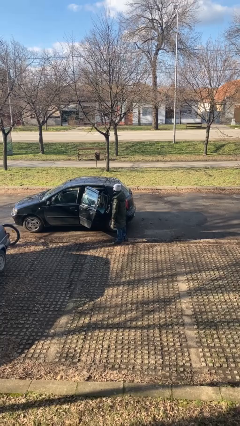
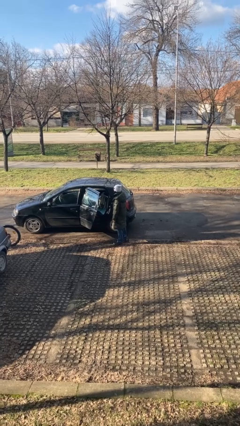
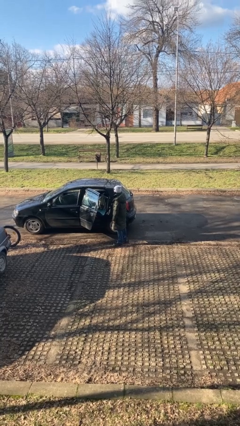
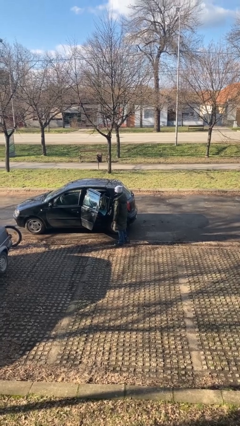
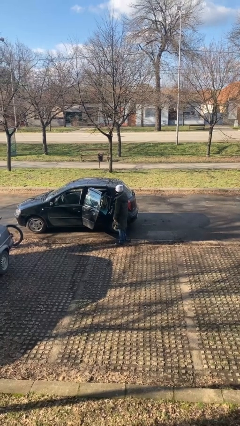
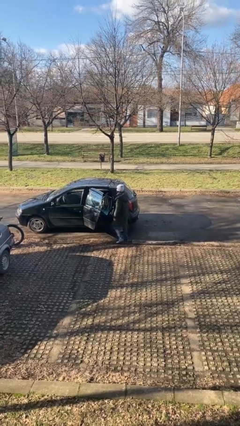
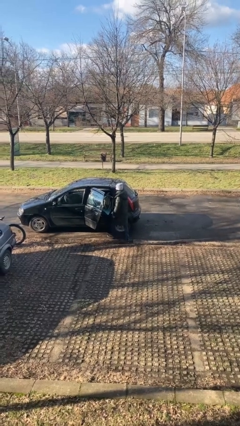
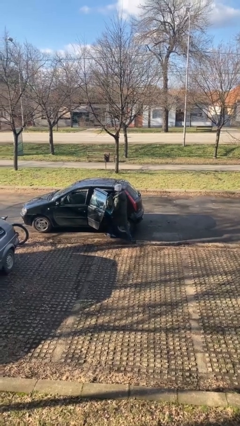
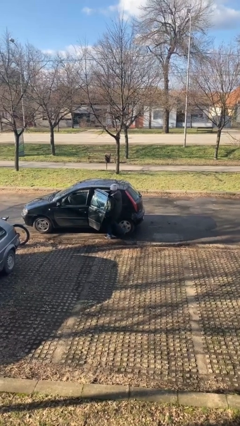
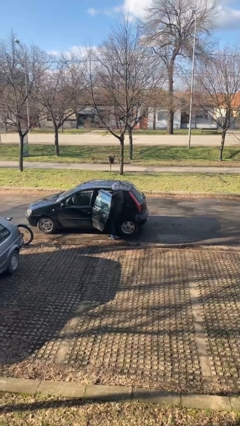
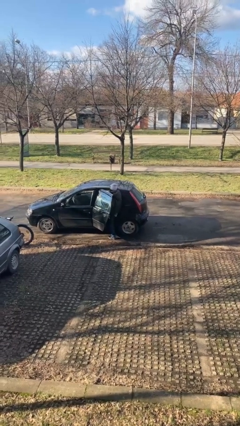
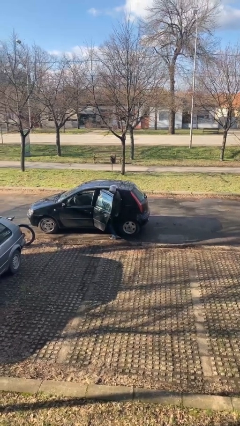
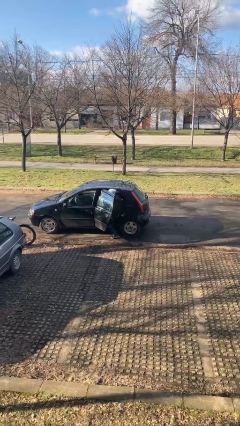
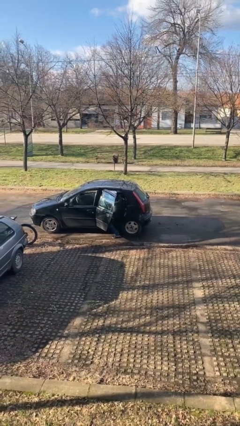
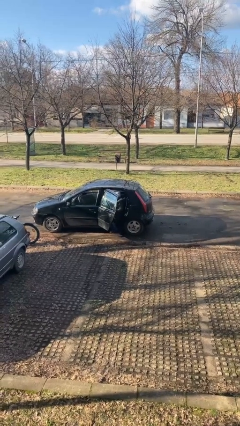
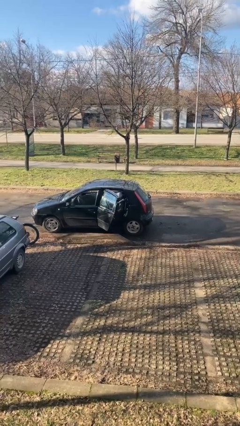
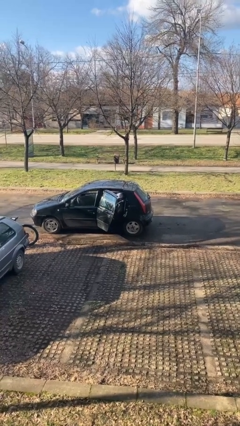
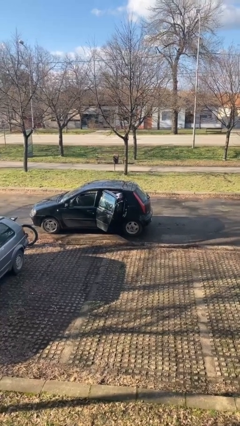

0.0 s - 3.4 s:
person enters car

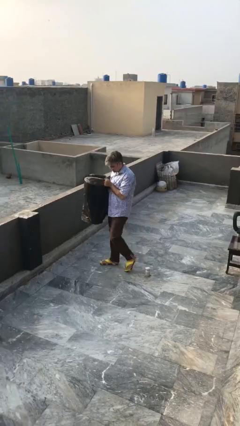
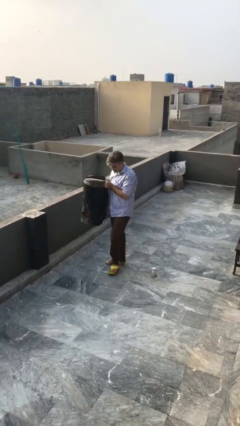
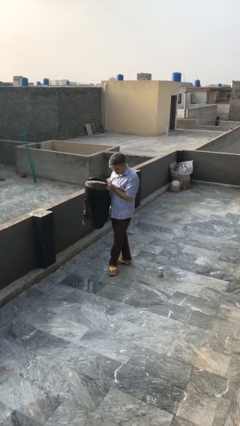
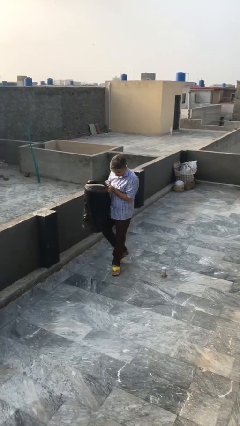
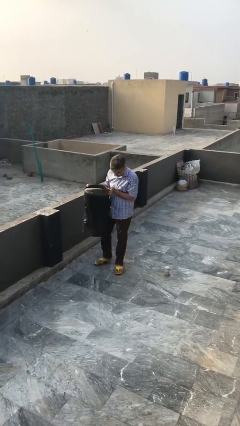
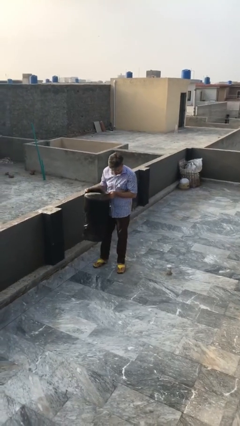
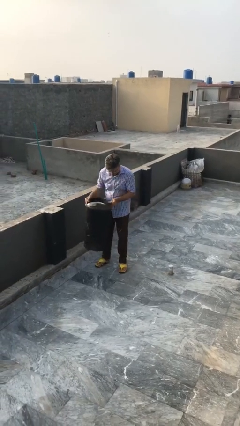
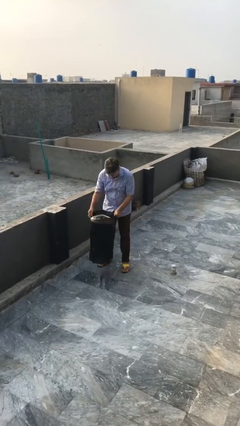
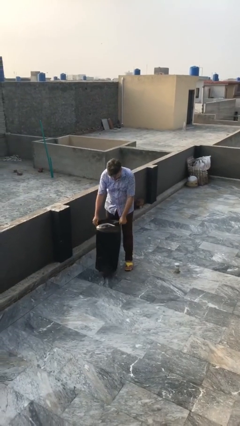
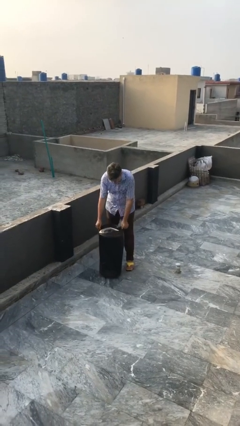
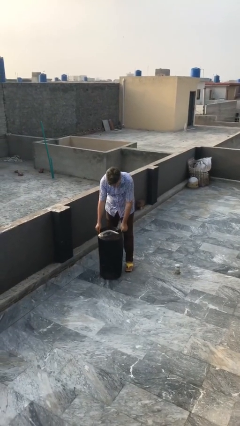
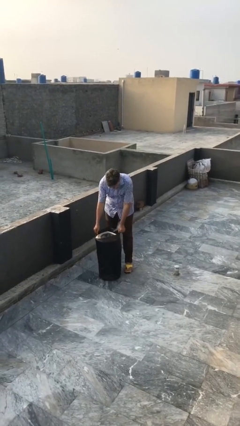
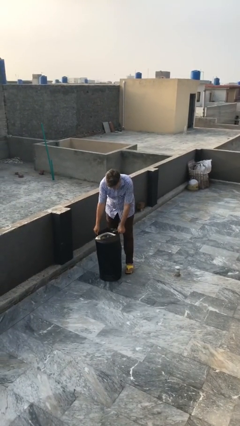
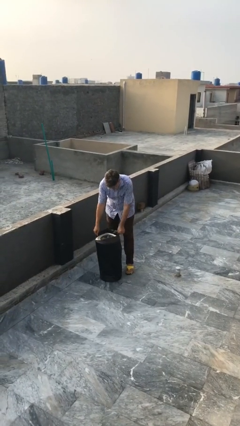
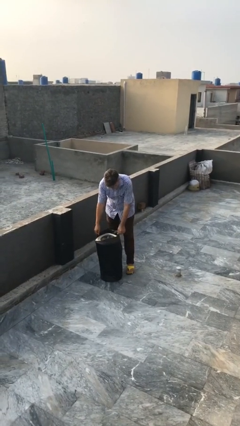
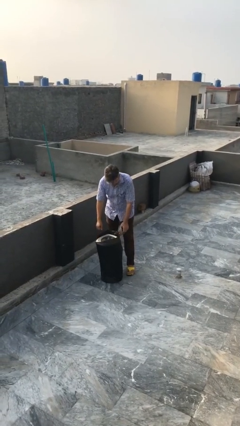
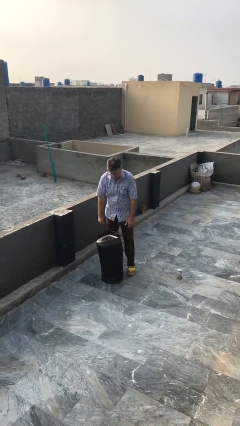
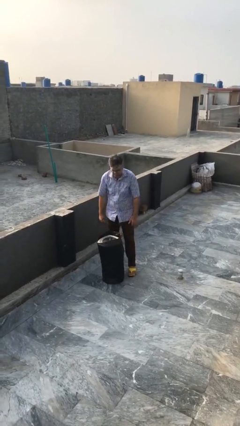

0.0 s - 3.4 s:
person puts down object on floor

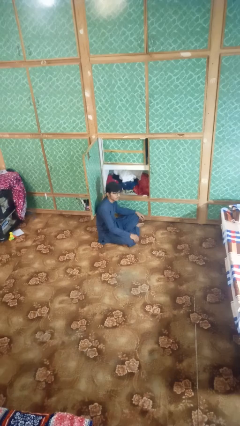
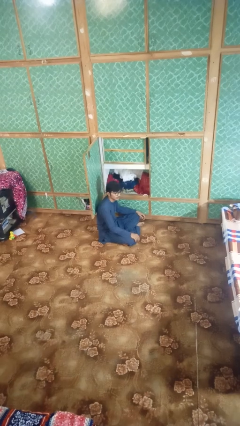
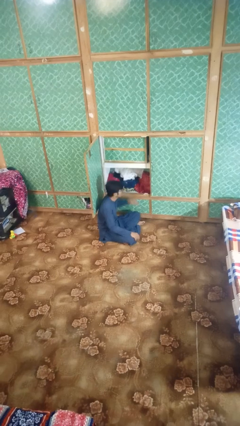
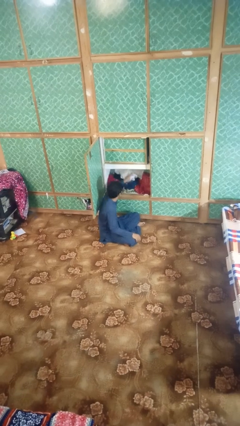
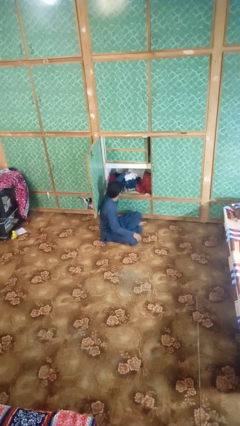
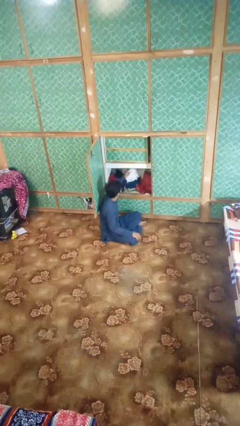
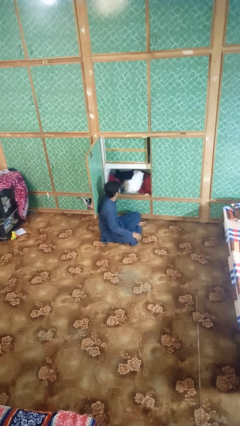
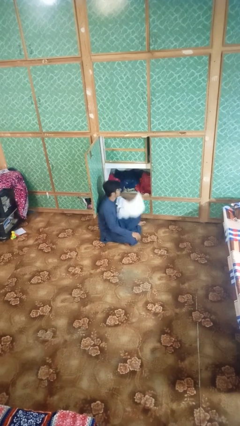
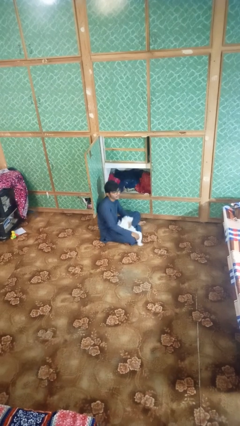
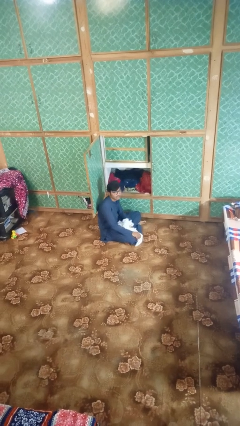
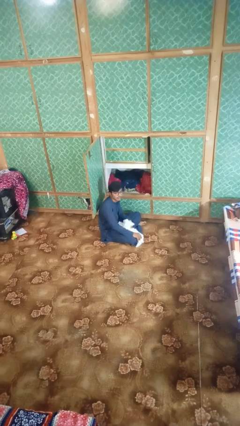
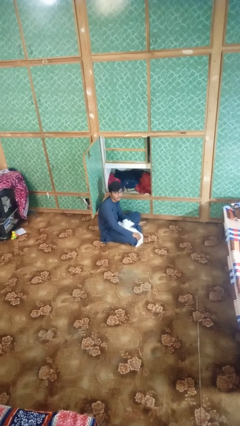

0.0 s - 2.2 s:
person takes clothes from dresser

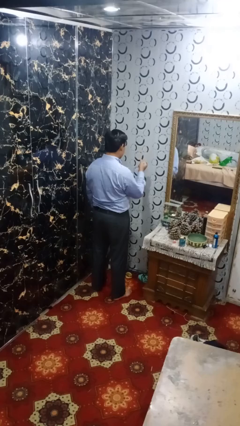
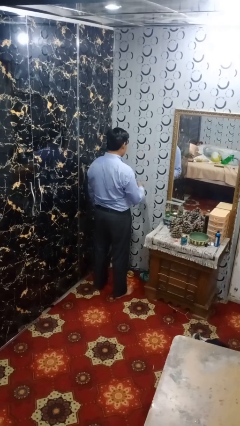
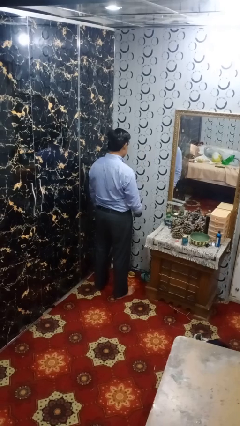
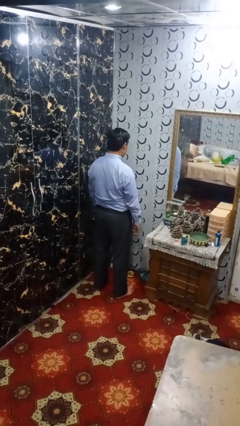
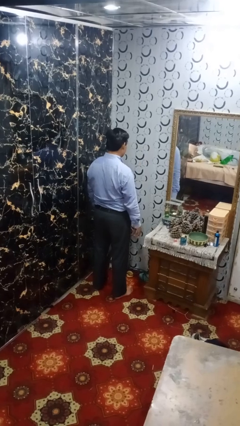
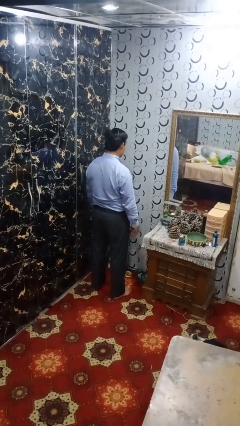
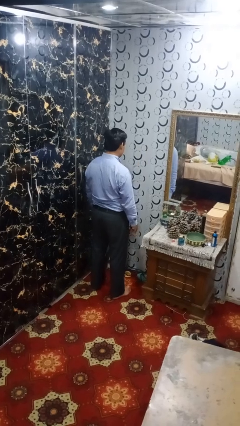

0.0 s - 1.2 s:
person snaps fingers

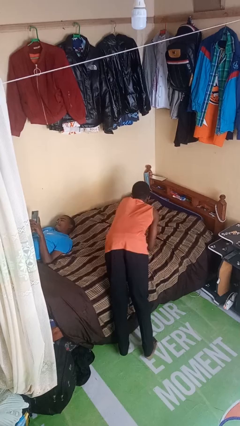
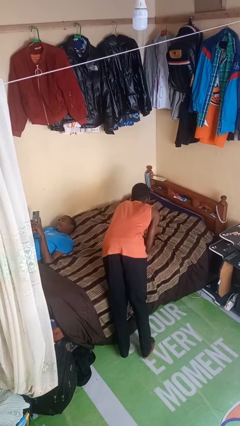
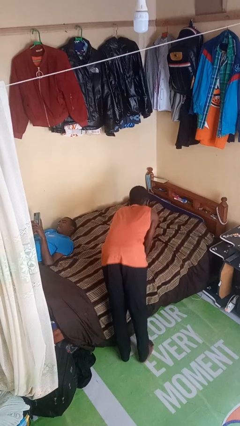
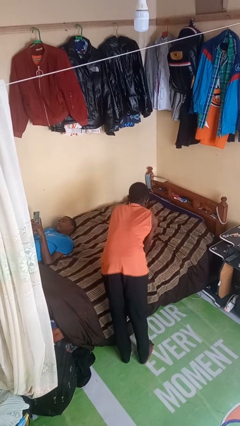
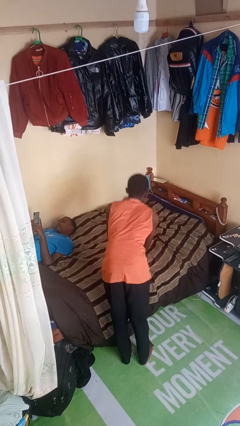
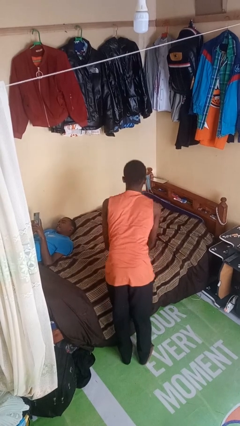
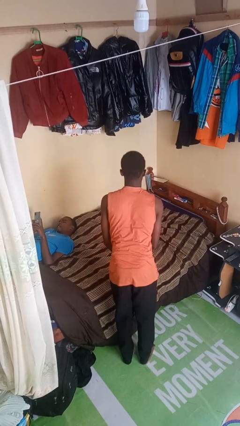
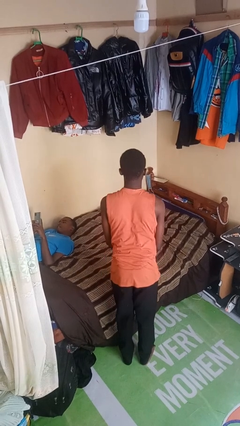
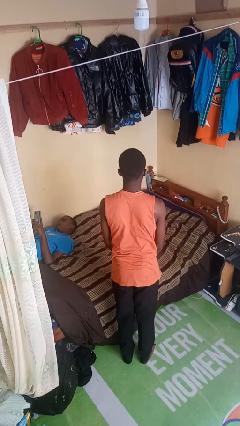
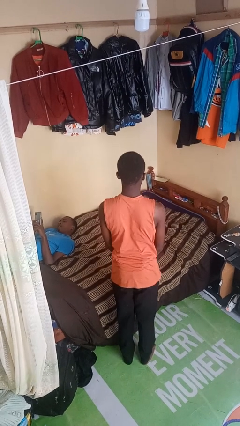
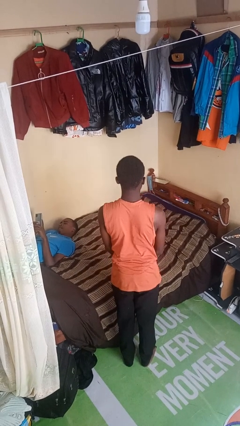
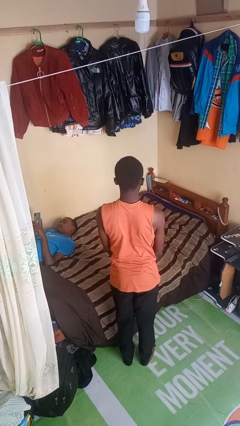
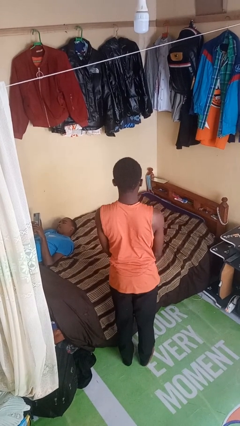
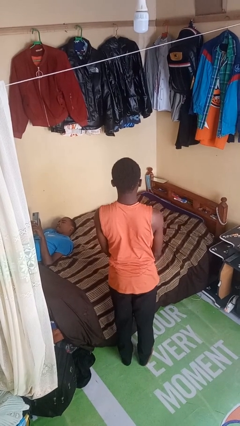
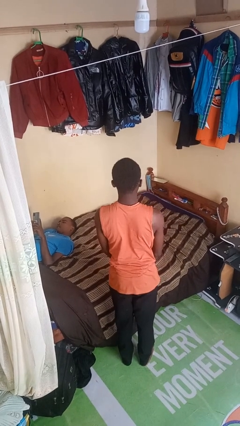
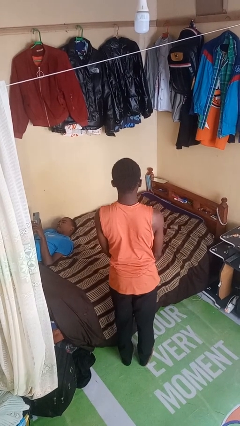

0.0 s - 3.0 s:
person stands up

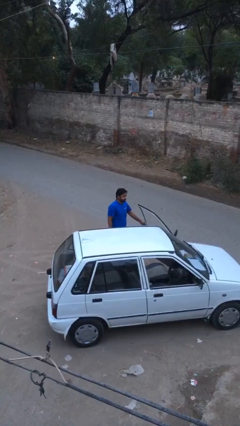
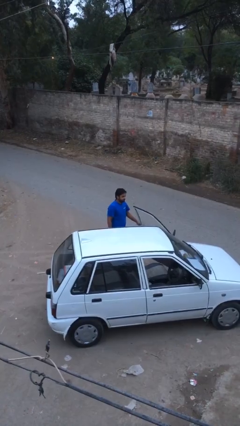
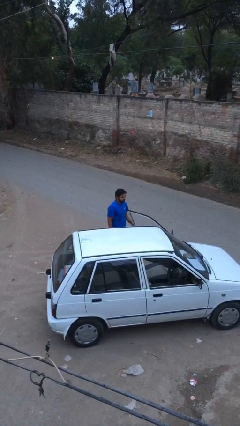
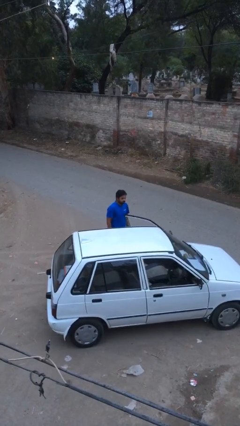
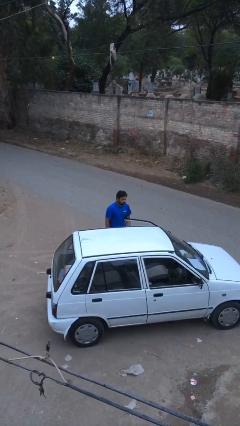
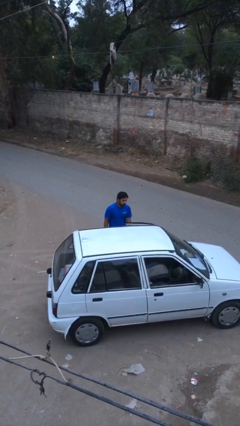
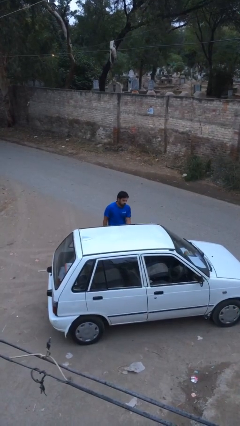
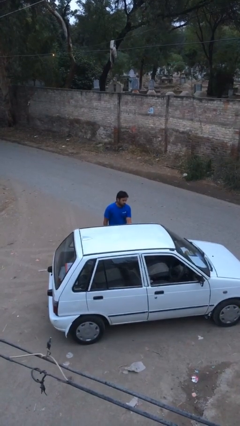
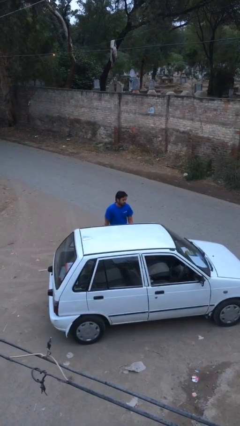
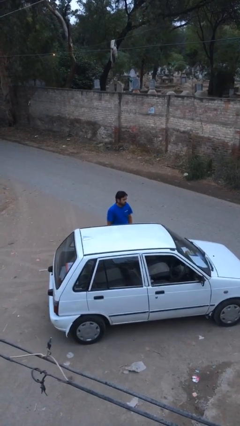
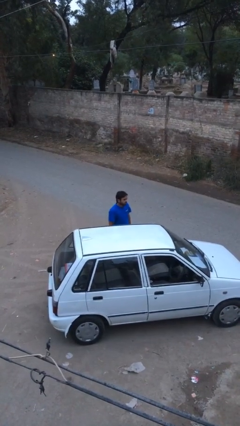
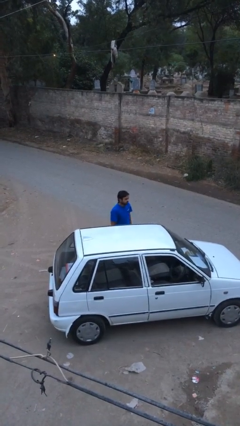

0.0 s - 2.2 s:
person closes car door

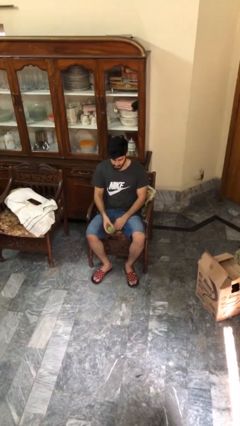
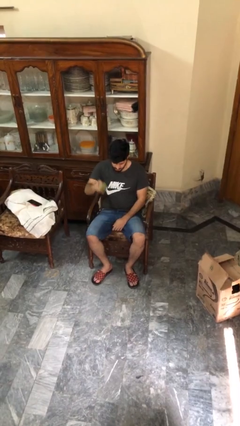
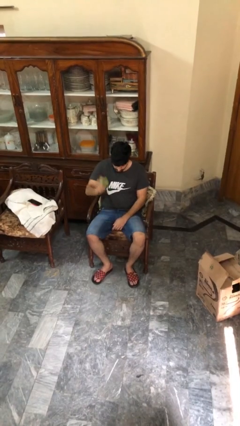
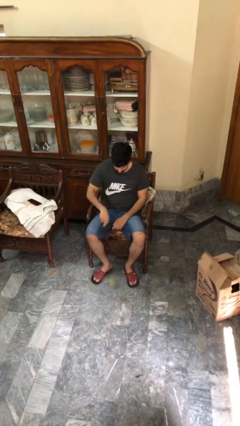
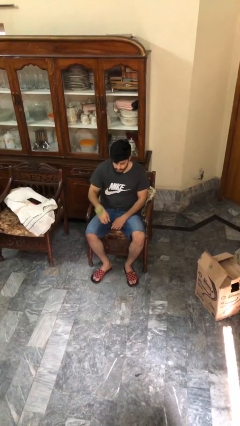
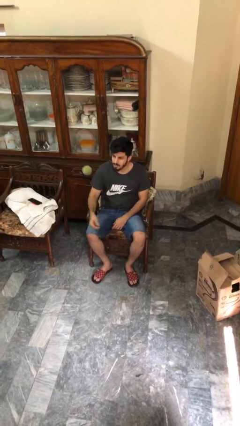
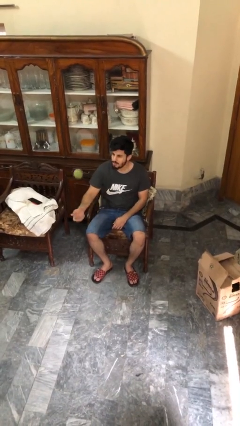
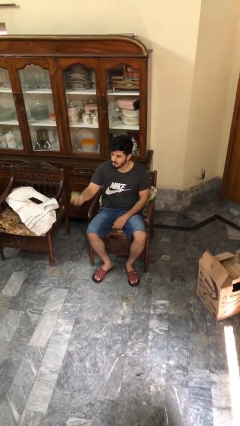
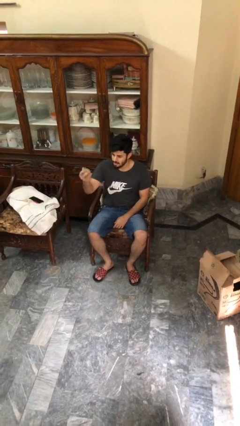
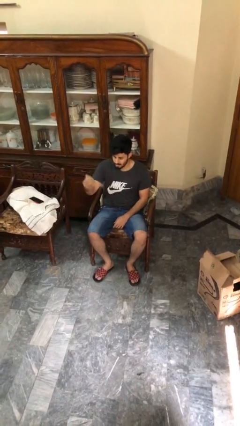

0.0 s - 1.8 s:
person bounces ball on floor
